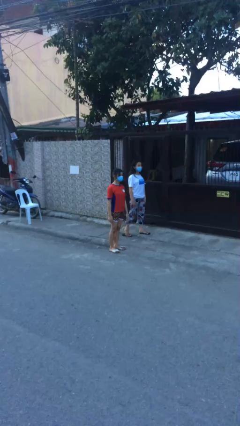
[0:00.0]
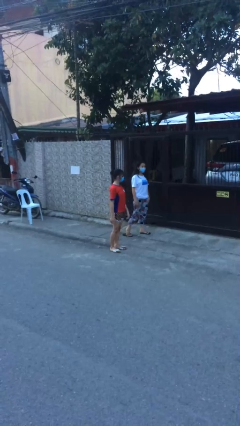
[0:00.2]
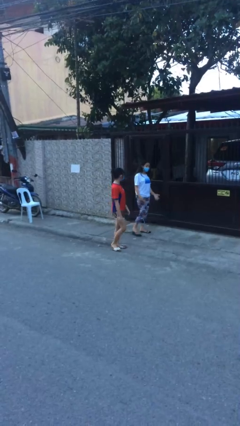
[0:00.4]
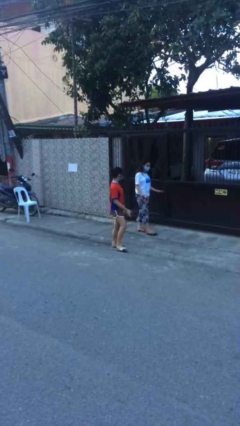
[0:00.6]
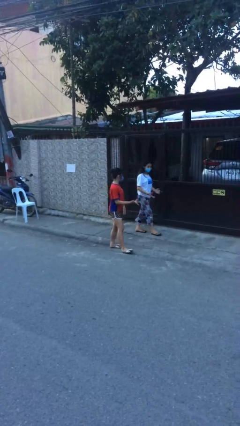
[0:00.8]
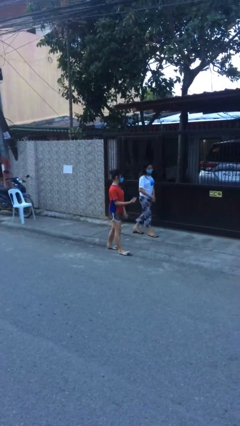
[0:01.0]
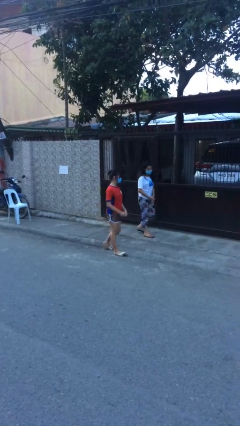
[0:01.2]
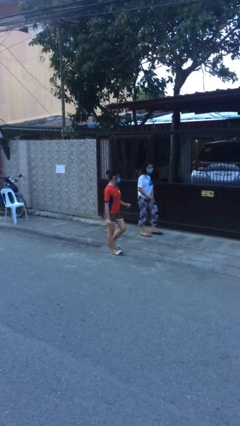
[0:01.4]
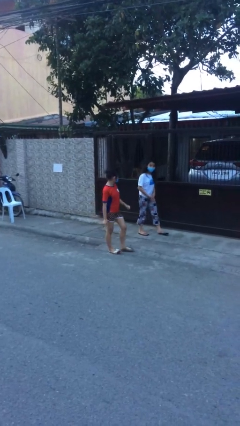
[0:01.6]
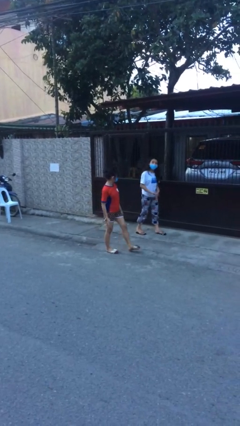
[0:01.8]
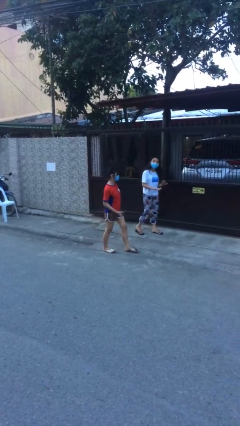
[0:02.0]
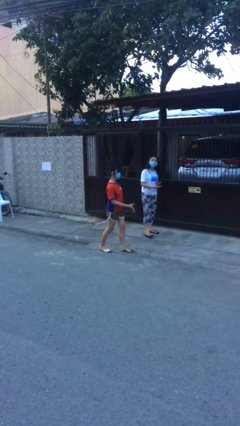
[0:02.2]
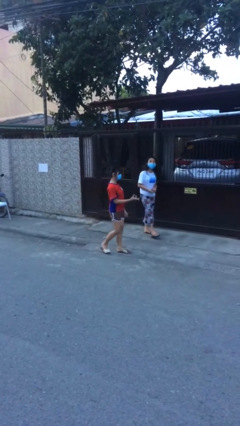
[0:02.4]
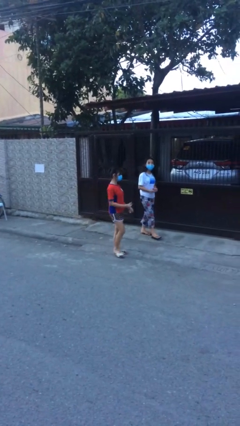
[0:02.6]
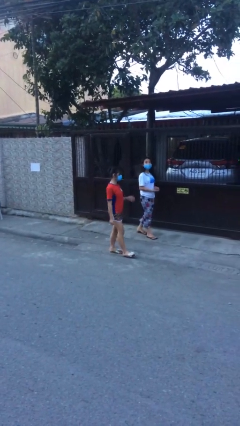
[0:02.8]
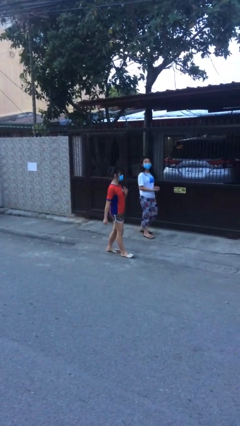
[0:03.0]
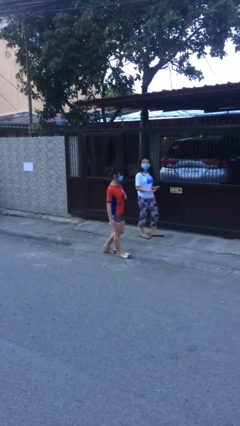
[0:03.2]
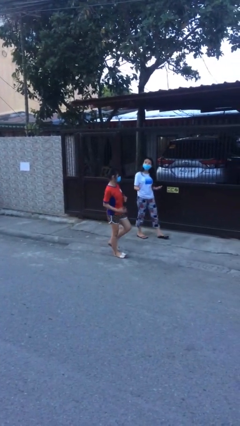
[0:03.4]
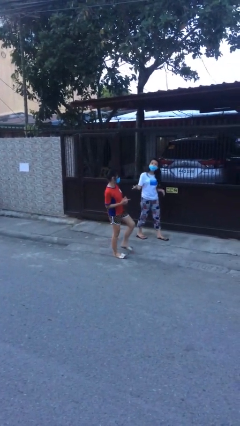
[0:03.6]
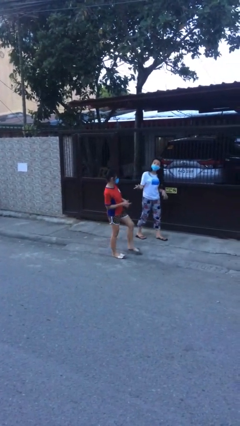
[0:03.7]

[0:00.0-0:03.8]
person talks to person

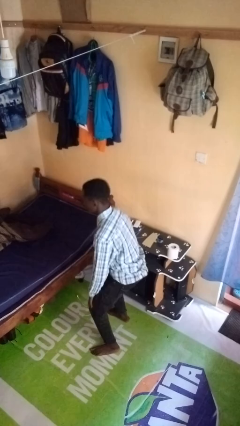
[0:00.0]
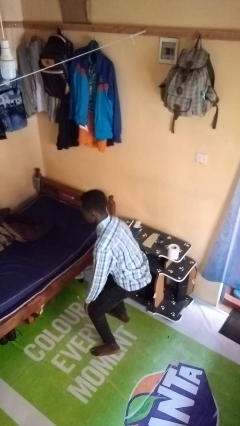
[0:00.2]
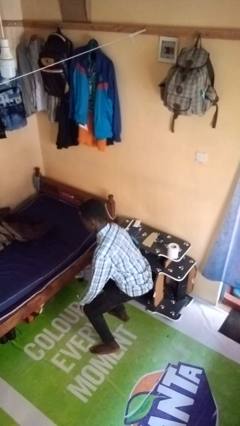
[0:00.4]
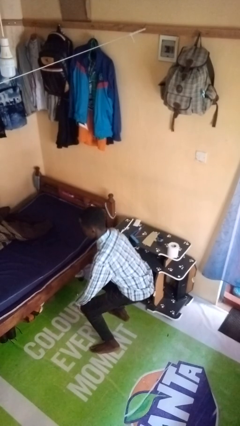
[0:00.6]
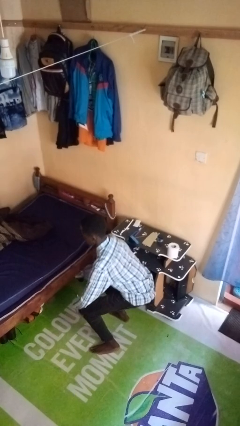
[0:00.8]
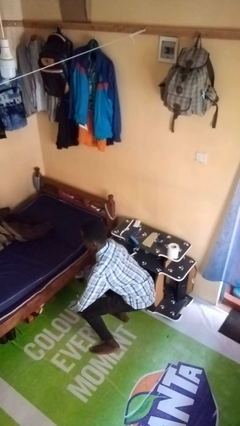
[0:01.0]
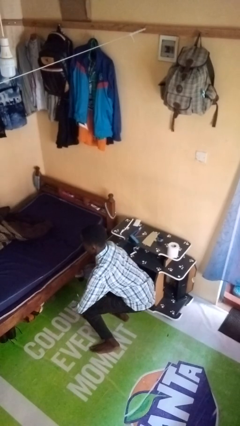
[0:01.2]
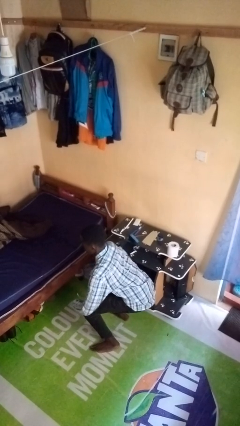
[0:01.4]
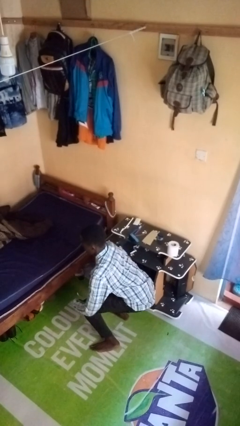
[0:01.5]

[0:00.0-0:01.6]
person squats

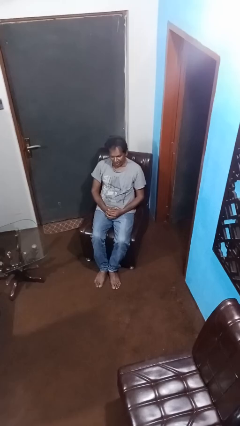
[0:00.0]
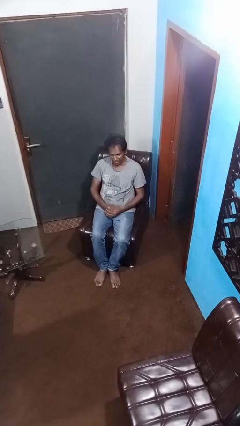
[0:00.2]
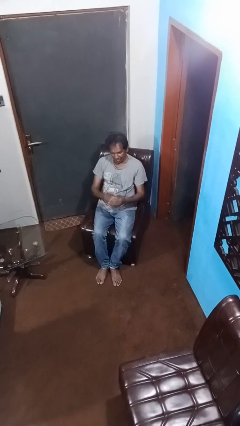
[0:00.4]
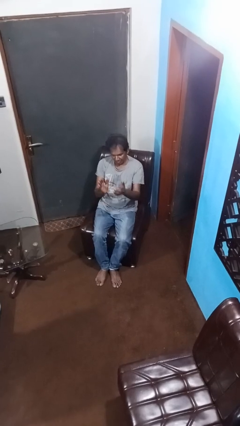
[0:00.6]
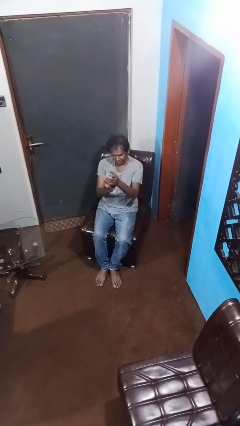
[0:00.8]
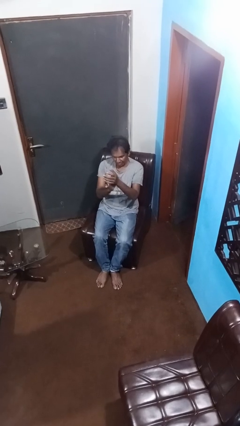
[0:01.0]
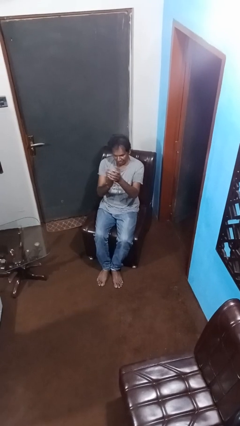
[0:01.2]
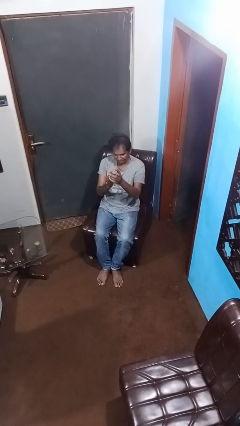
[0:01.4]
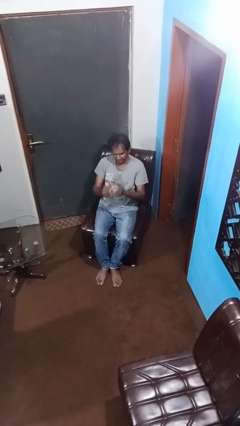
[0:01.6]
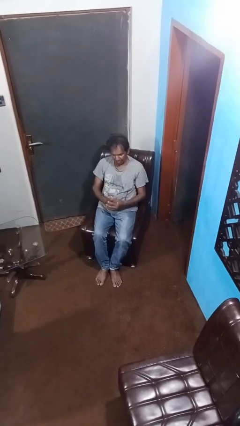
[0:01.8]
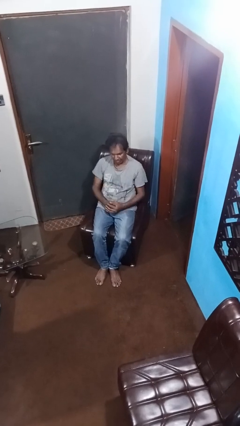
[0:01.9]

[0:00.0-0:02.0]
person claps hands

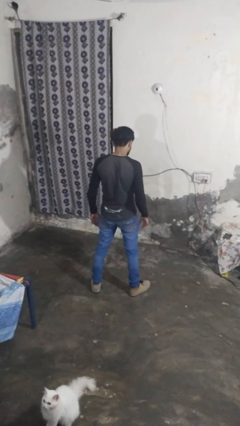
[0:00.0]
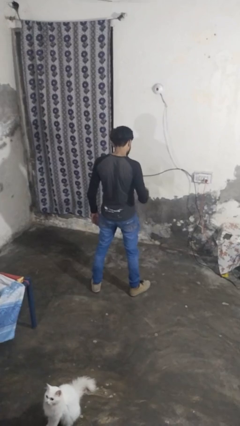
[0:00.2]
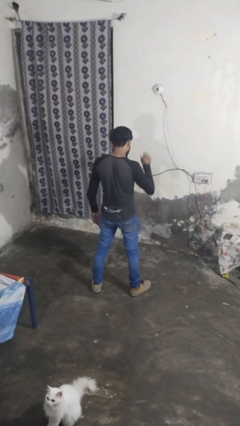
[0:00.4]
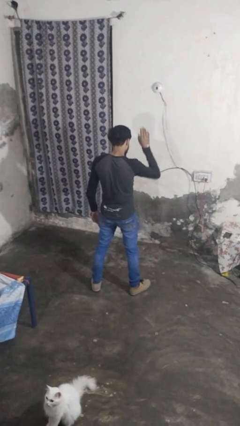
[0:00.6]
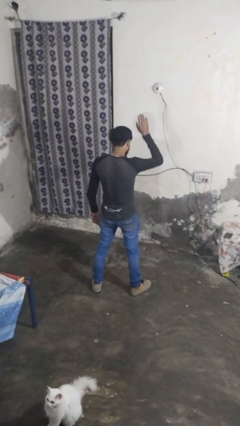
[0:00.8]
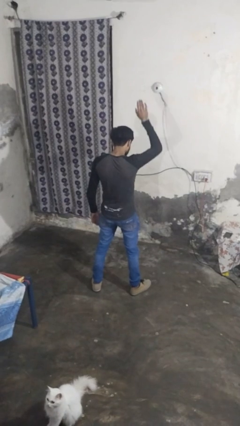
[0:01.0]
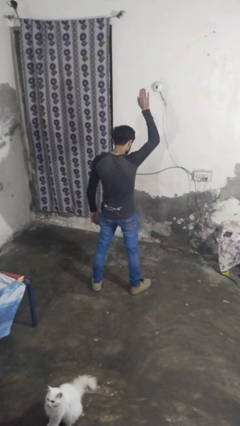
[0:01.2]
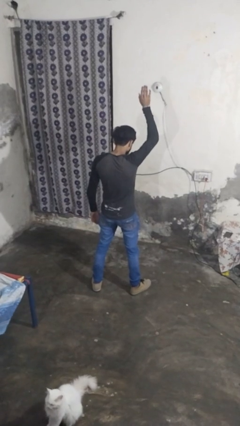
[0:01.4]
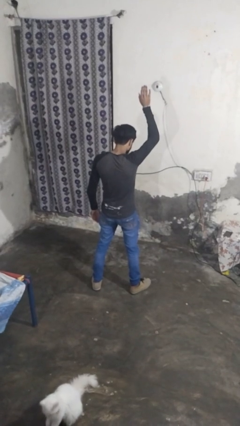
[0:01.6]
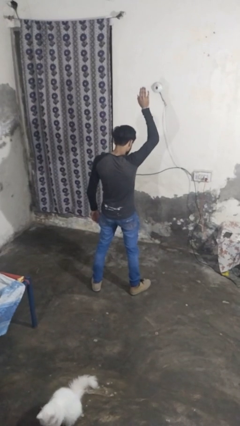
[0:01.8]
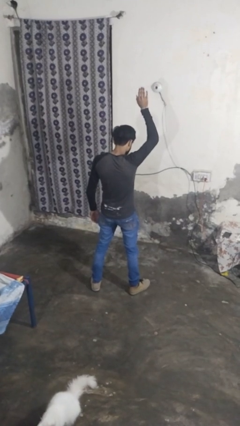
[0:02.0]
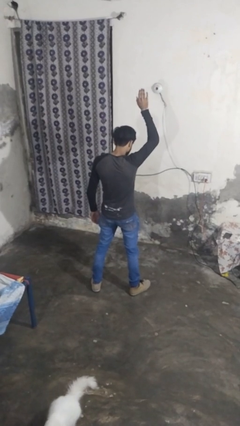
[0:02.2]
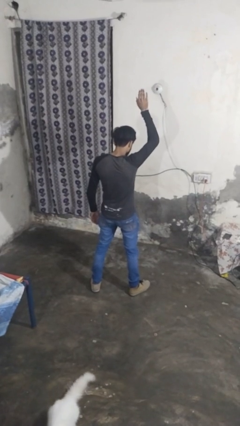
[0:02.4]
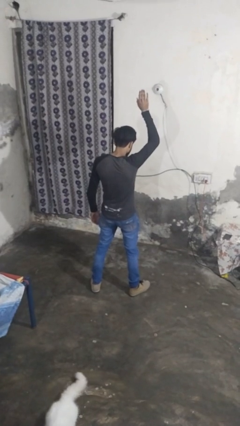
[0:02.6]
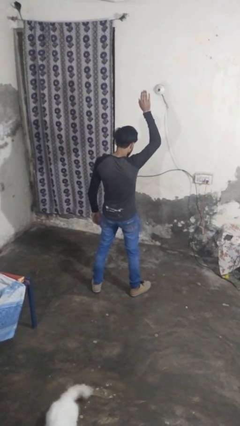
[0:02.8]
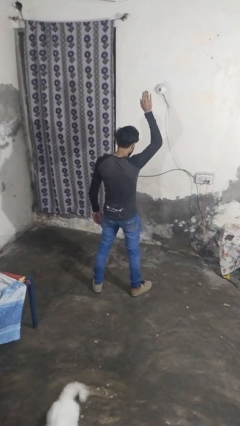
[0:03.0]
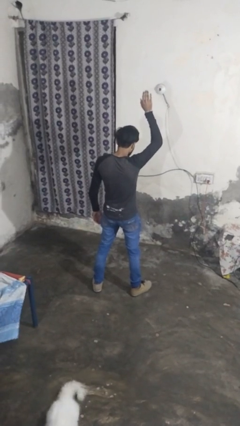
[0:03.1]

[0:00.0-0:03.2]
person gestures raise hand

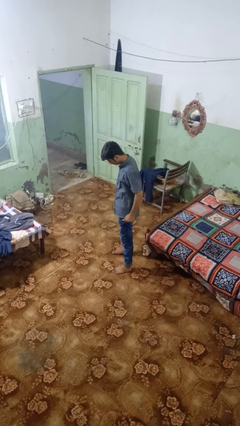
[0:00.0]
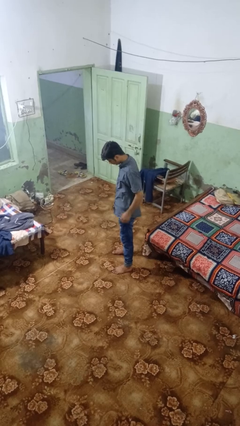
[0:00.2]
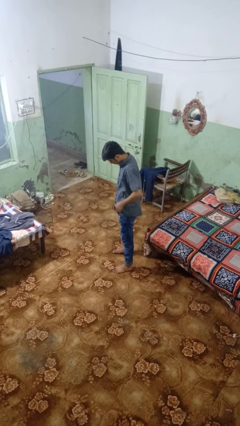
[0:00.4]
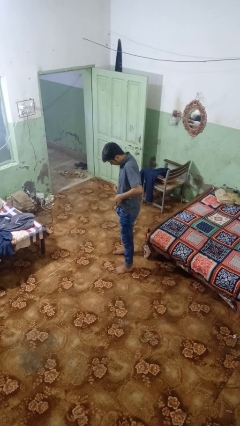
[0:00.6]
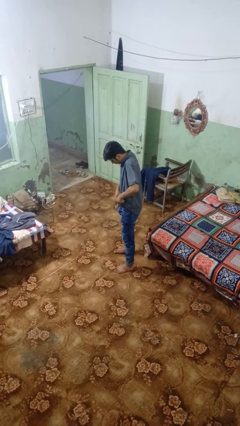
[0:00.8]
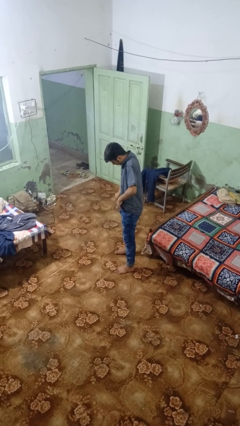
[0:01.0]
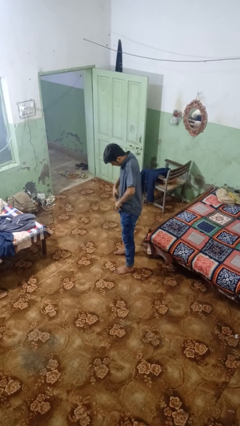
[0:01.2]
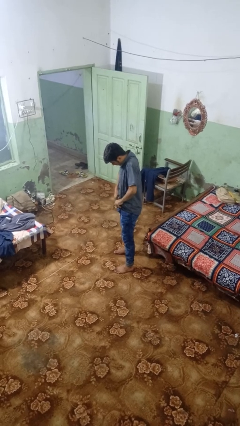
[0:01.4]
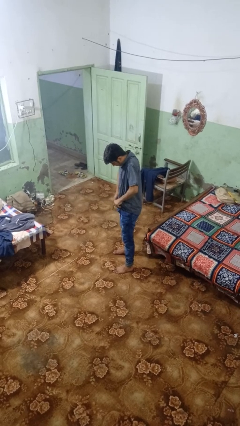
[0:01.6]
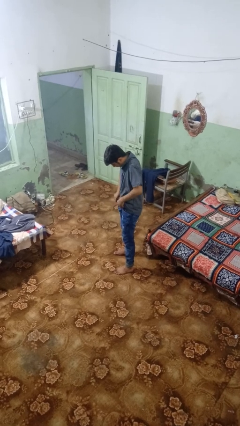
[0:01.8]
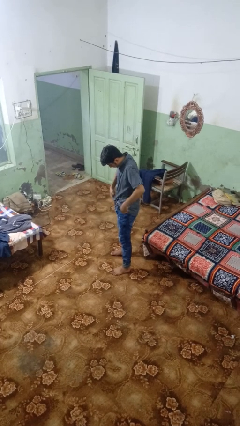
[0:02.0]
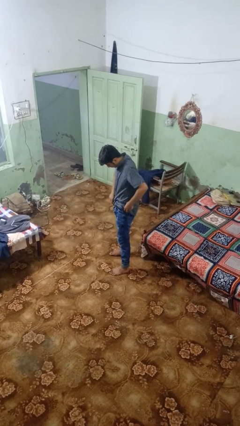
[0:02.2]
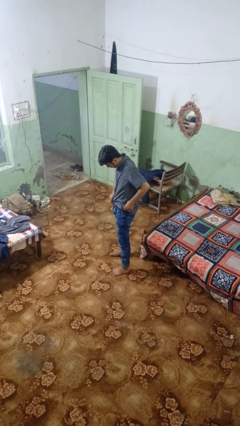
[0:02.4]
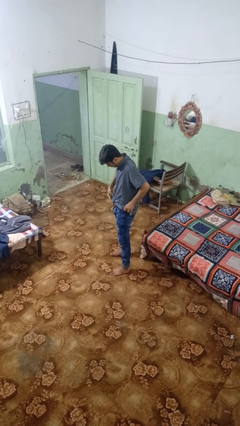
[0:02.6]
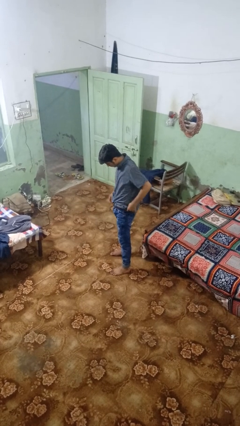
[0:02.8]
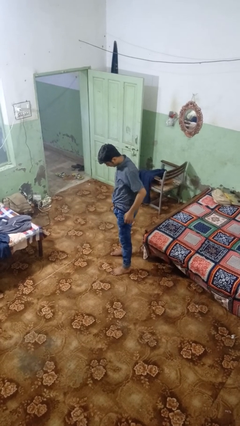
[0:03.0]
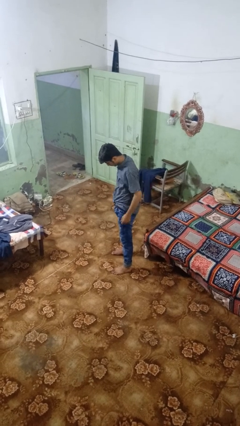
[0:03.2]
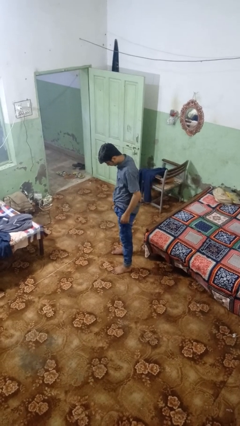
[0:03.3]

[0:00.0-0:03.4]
person tucks in shirt

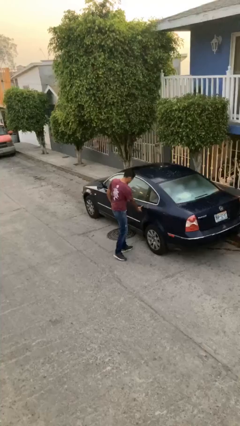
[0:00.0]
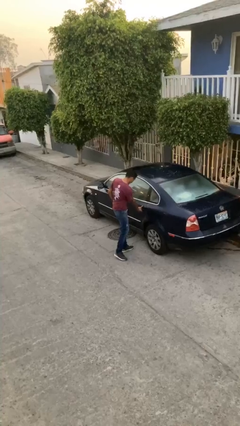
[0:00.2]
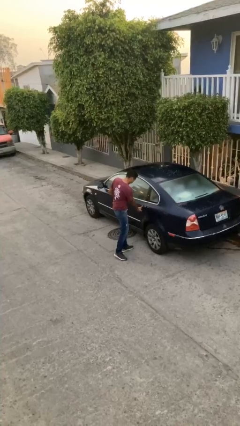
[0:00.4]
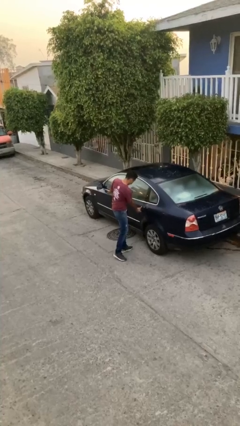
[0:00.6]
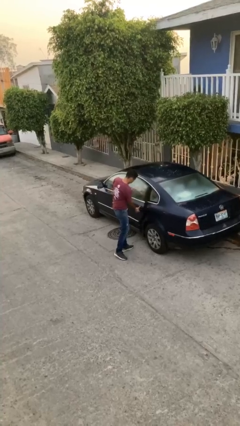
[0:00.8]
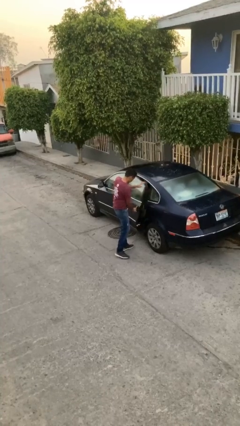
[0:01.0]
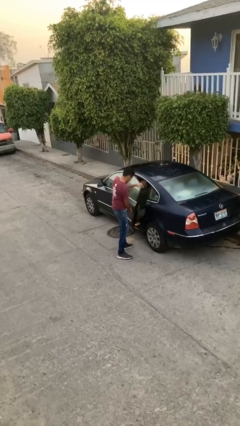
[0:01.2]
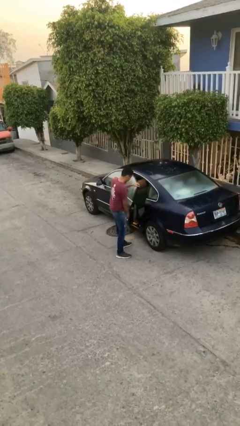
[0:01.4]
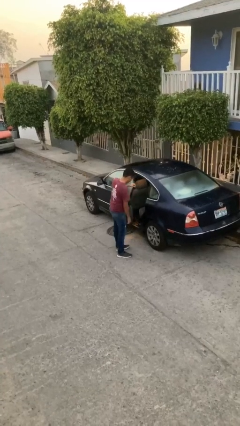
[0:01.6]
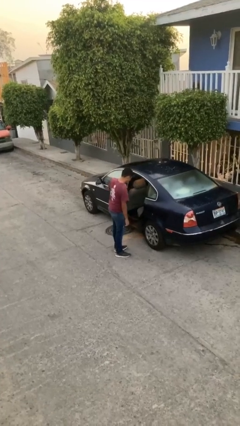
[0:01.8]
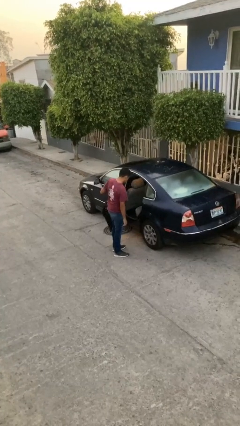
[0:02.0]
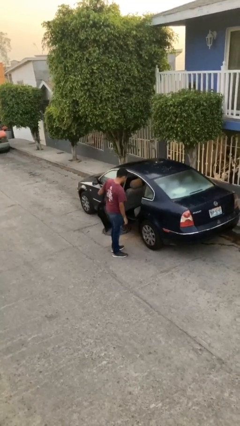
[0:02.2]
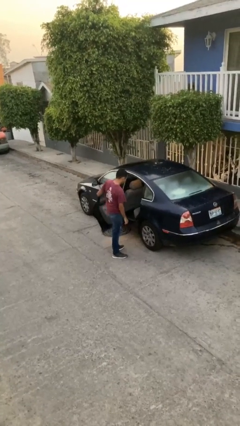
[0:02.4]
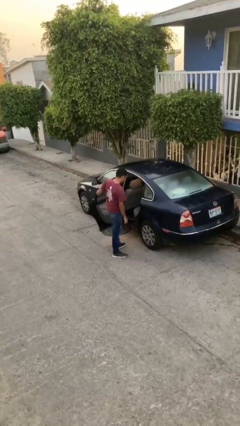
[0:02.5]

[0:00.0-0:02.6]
person opens car door

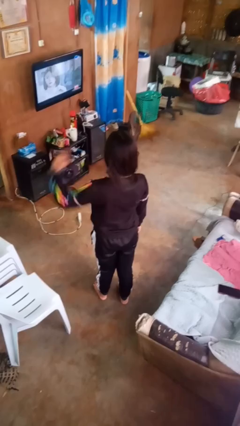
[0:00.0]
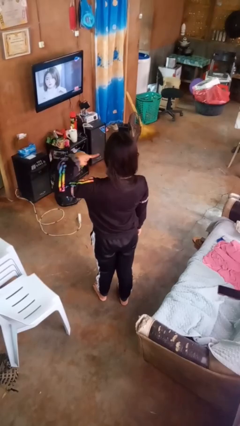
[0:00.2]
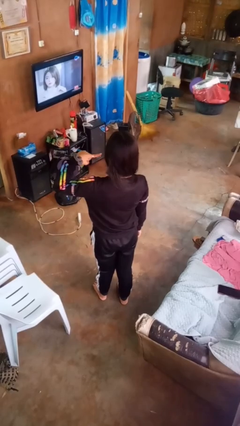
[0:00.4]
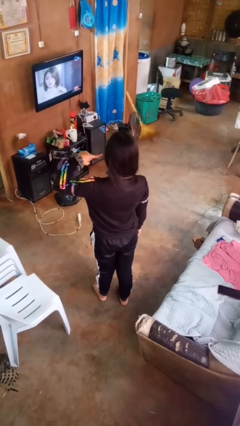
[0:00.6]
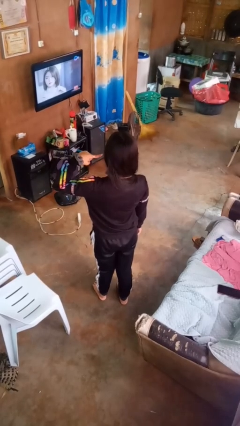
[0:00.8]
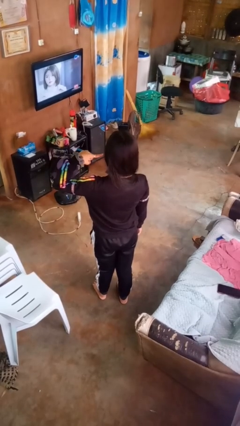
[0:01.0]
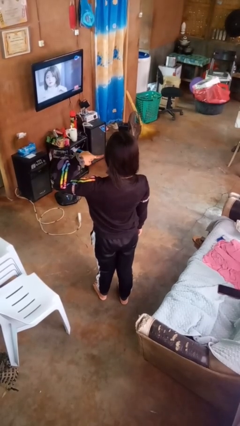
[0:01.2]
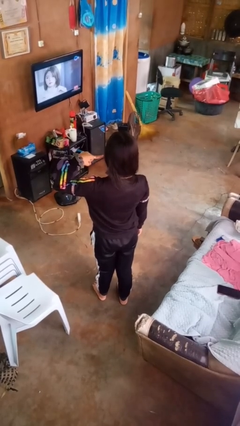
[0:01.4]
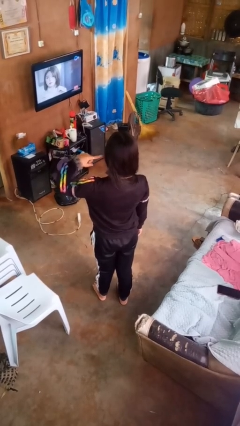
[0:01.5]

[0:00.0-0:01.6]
person gestures listen closely
